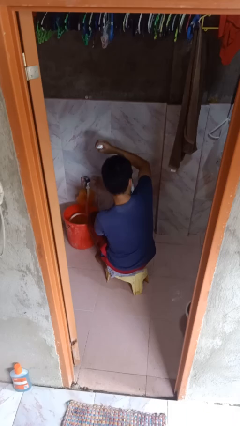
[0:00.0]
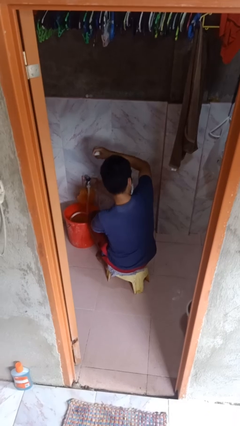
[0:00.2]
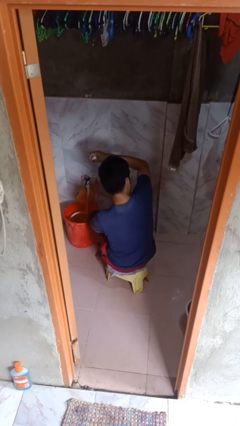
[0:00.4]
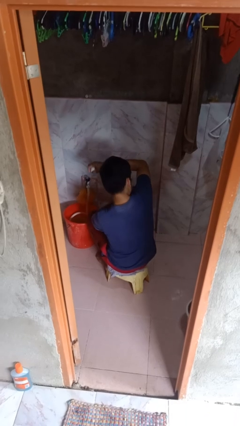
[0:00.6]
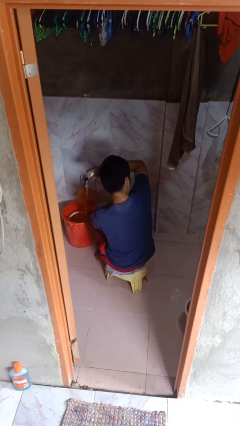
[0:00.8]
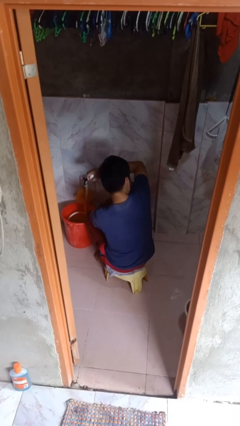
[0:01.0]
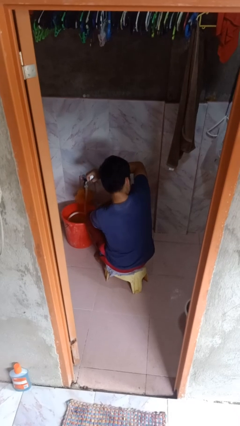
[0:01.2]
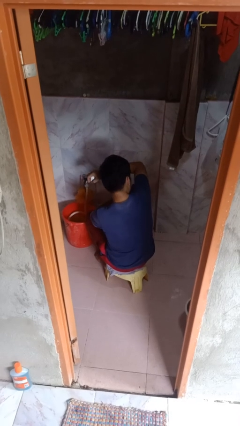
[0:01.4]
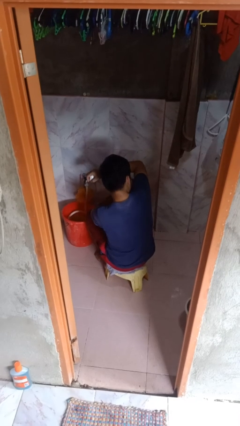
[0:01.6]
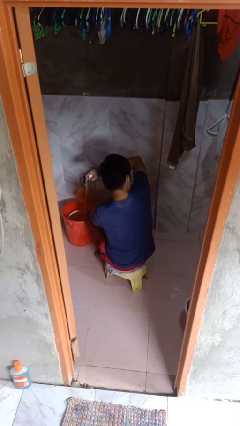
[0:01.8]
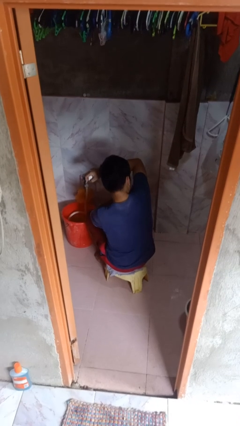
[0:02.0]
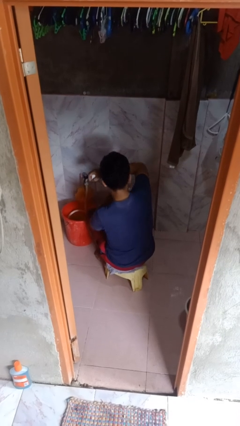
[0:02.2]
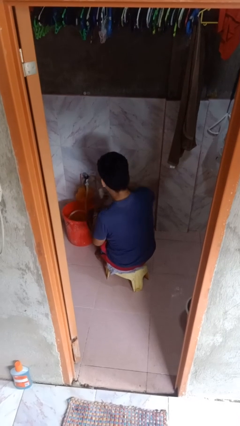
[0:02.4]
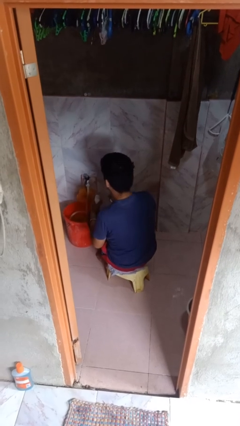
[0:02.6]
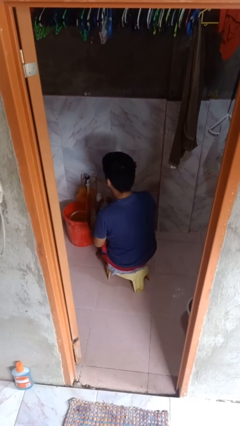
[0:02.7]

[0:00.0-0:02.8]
person applies deodorant

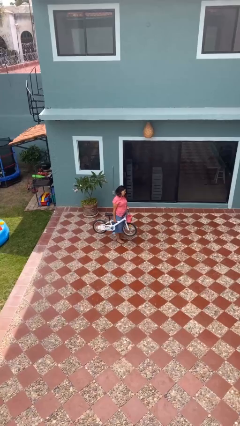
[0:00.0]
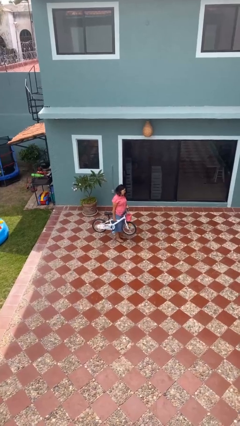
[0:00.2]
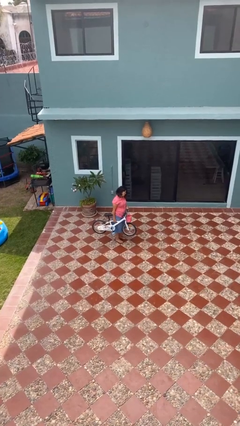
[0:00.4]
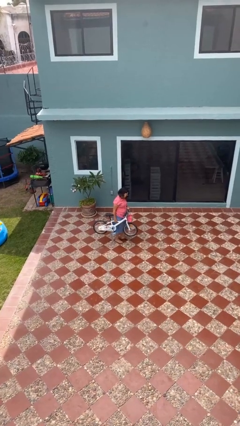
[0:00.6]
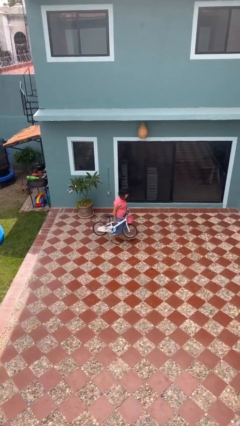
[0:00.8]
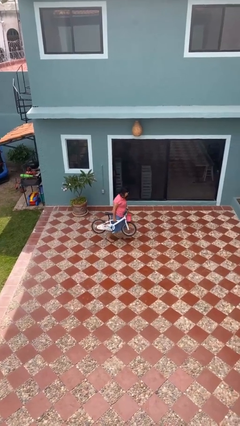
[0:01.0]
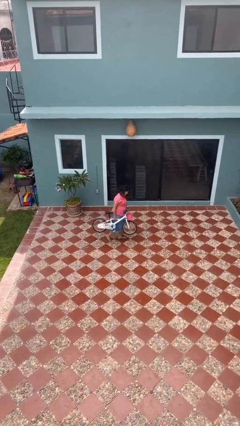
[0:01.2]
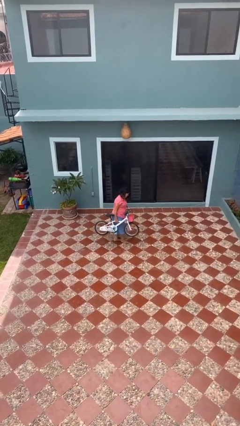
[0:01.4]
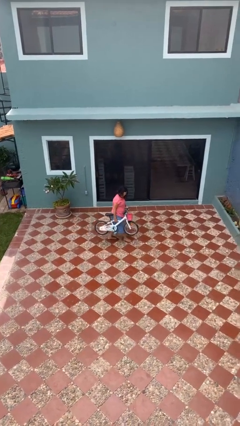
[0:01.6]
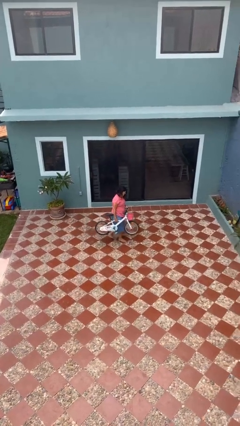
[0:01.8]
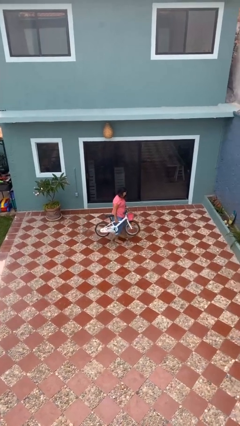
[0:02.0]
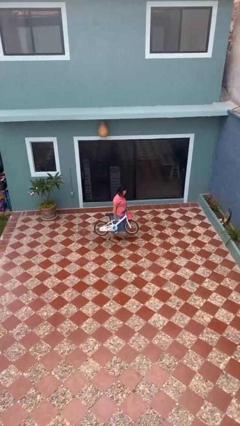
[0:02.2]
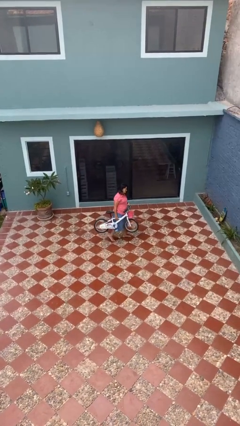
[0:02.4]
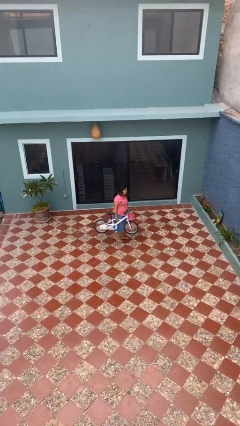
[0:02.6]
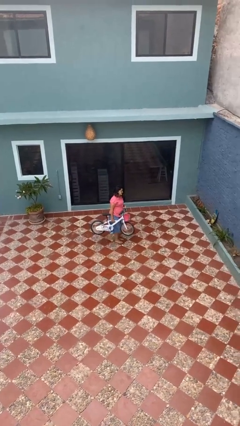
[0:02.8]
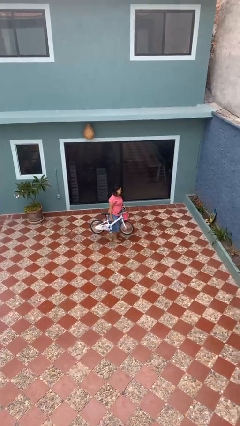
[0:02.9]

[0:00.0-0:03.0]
person carries bicycle

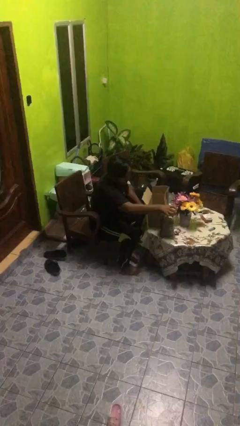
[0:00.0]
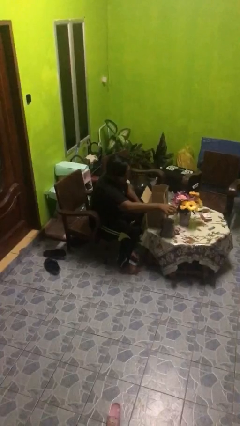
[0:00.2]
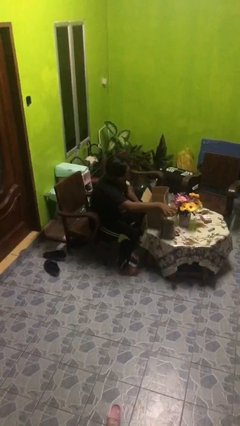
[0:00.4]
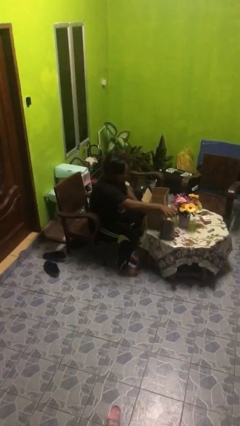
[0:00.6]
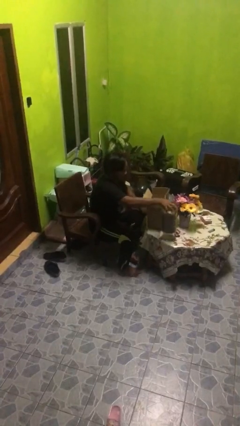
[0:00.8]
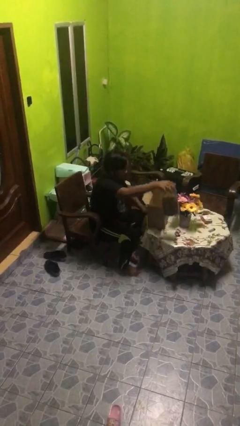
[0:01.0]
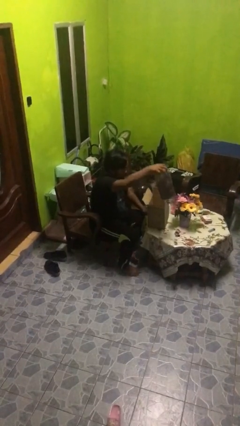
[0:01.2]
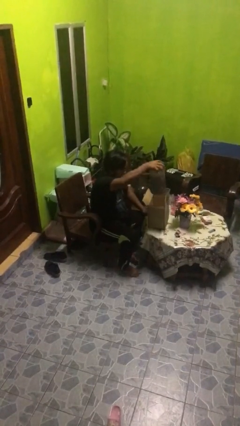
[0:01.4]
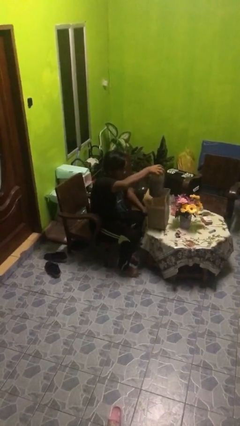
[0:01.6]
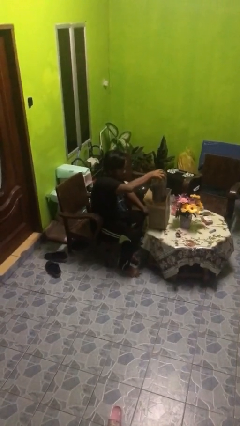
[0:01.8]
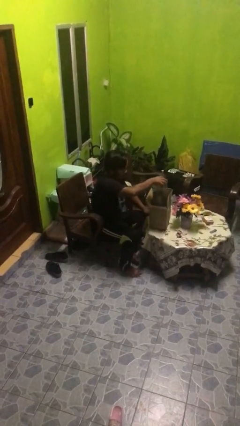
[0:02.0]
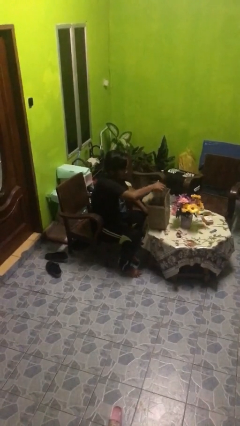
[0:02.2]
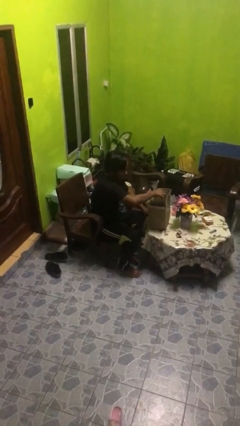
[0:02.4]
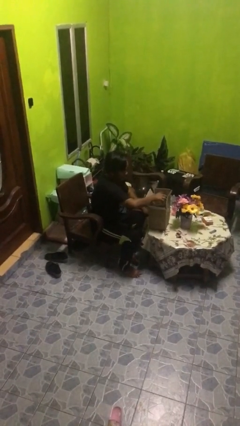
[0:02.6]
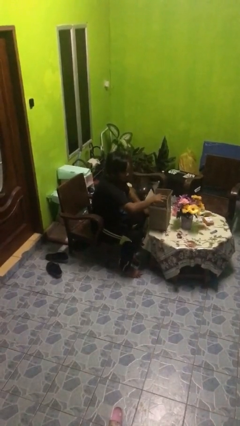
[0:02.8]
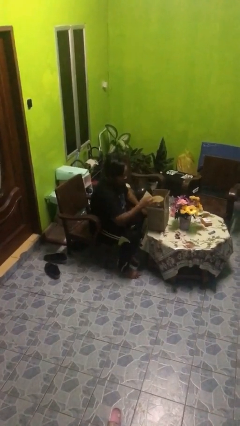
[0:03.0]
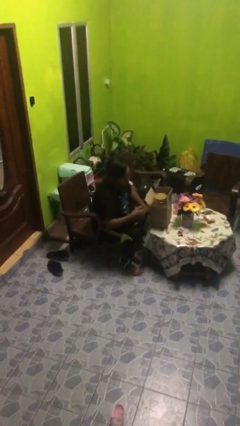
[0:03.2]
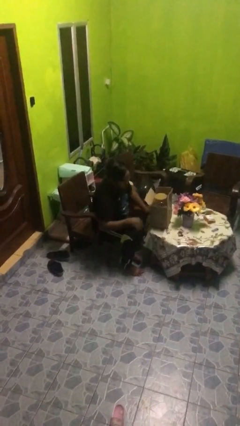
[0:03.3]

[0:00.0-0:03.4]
person puts object into box

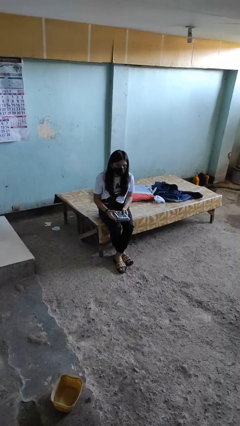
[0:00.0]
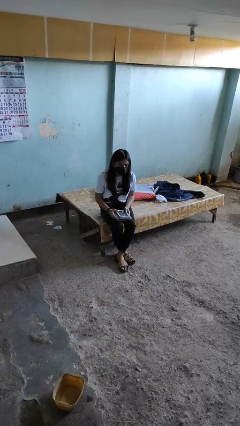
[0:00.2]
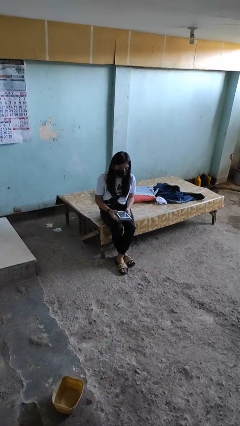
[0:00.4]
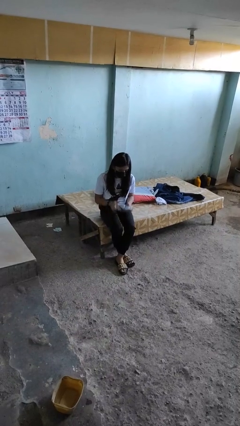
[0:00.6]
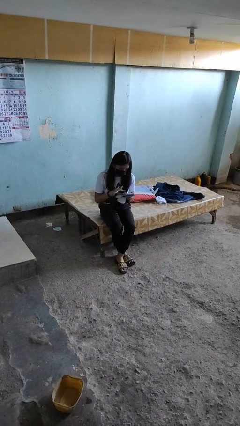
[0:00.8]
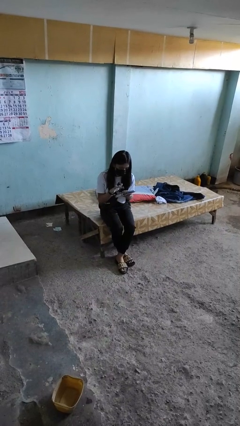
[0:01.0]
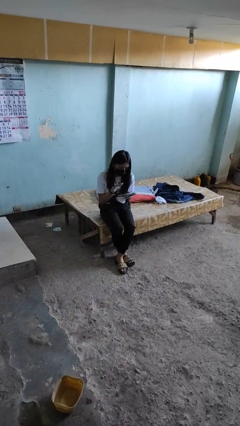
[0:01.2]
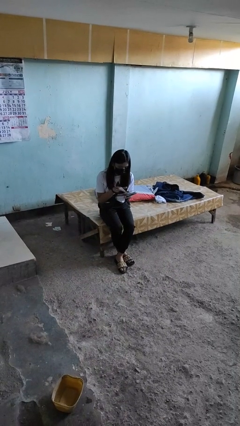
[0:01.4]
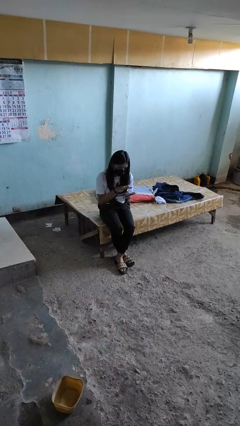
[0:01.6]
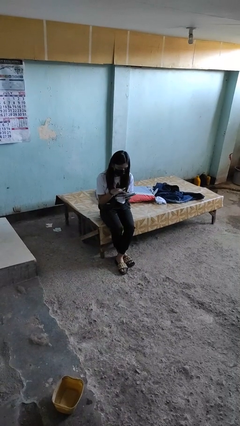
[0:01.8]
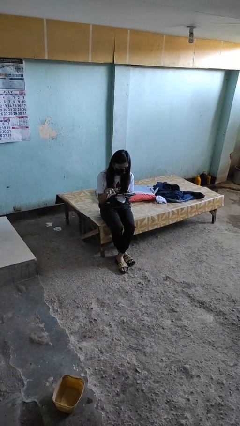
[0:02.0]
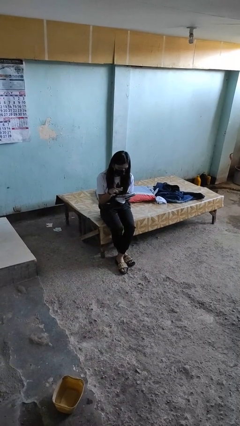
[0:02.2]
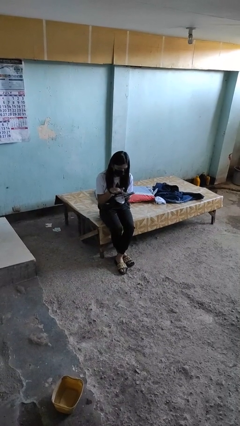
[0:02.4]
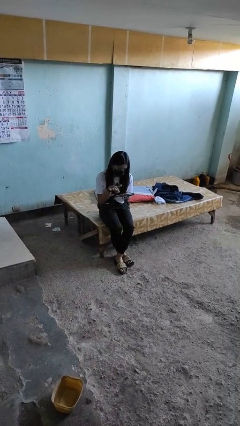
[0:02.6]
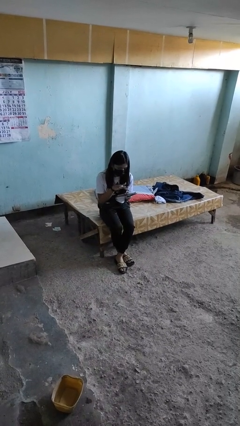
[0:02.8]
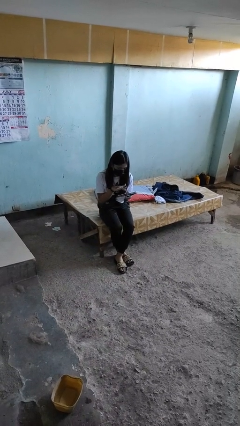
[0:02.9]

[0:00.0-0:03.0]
person interacts with tablet

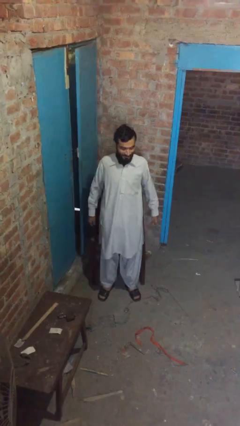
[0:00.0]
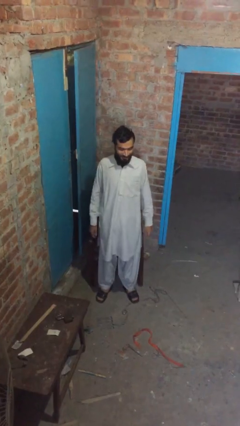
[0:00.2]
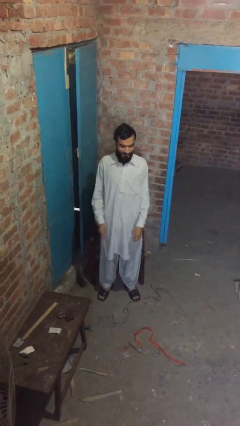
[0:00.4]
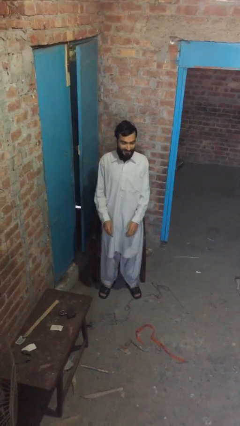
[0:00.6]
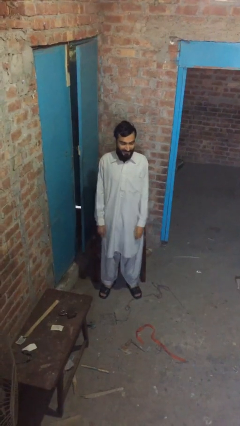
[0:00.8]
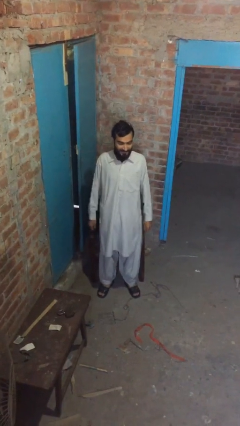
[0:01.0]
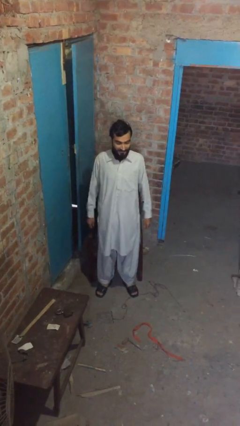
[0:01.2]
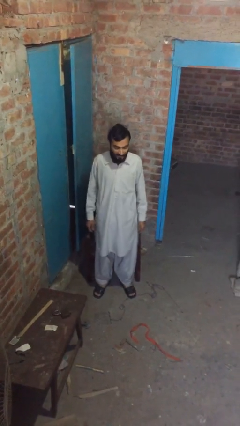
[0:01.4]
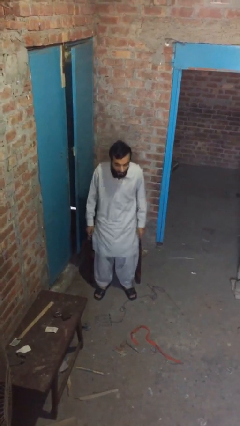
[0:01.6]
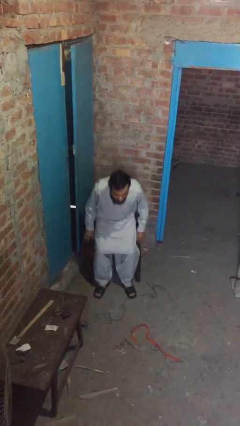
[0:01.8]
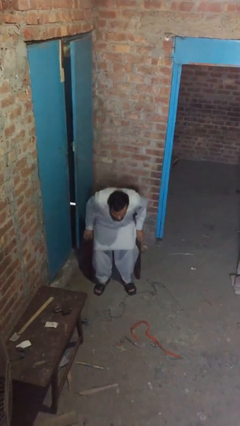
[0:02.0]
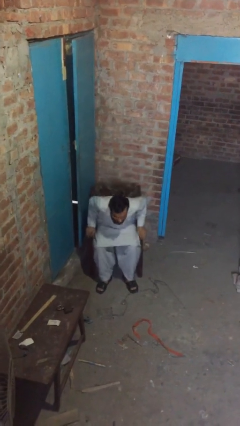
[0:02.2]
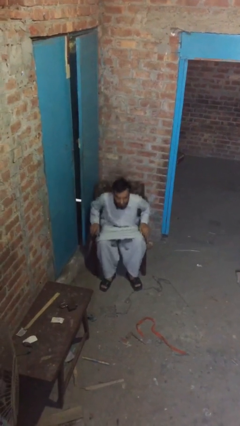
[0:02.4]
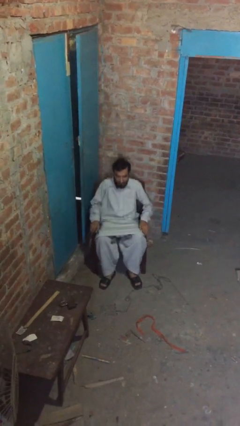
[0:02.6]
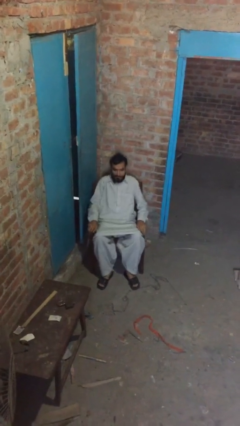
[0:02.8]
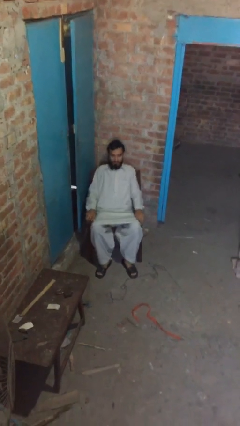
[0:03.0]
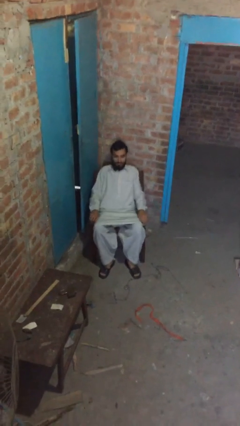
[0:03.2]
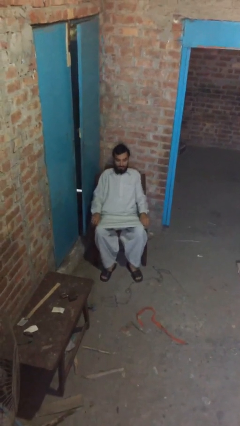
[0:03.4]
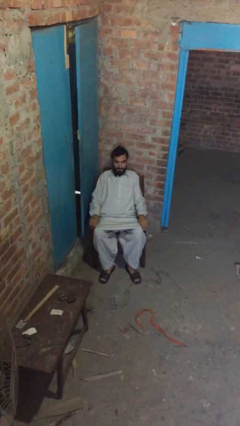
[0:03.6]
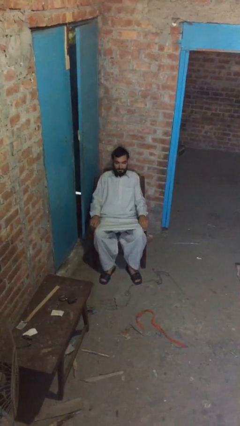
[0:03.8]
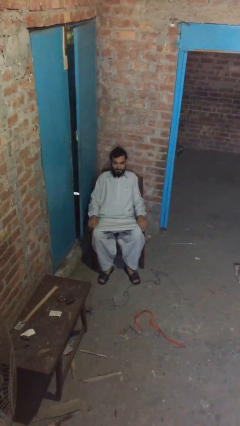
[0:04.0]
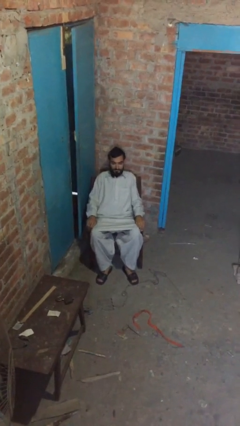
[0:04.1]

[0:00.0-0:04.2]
person sits down

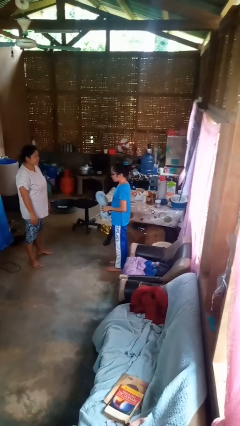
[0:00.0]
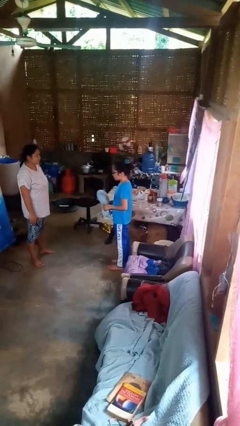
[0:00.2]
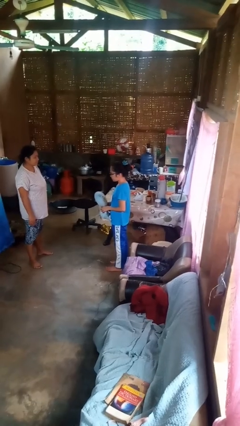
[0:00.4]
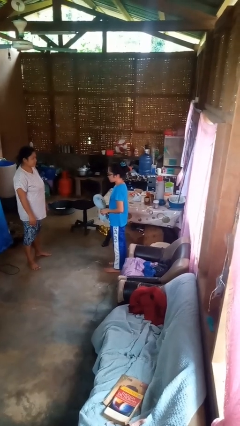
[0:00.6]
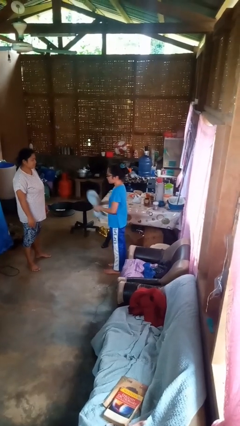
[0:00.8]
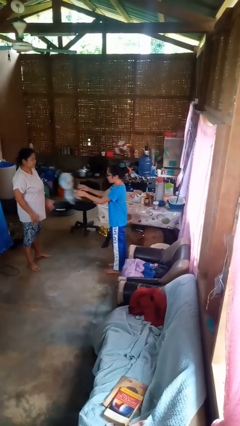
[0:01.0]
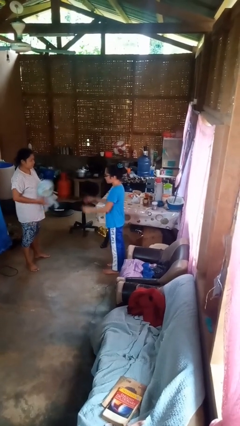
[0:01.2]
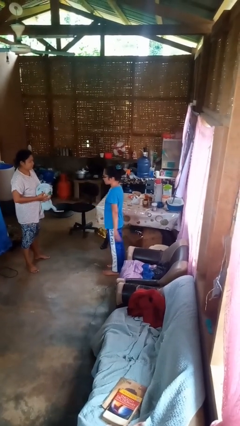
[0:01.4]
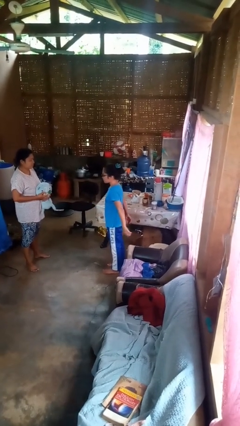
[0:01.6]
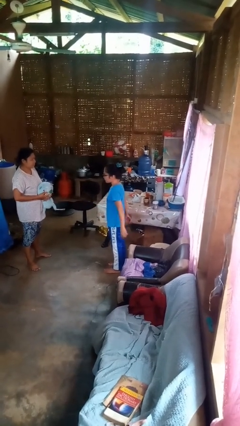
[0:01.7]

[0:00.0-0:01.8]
person throws object to person
